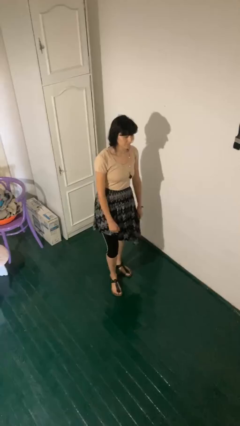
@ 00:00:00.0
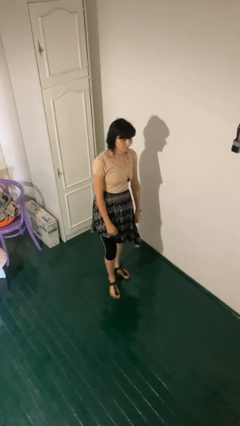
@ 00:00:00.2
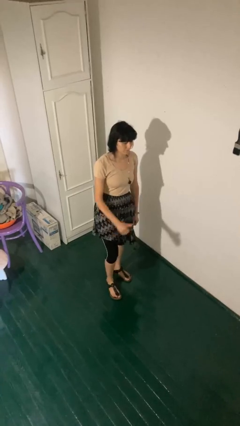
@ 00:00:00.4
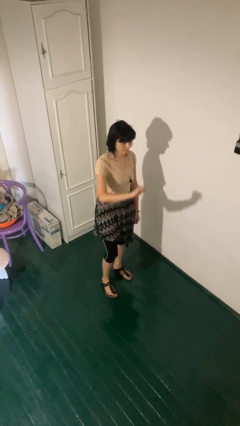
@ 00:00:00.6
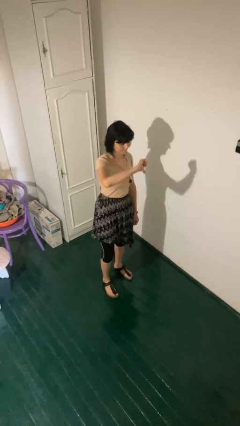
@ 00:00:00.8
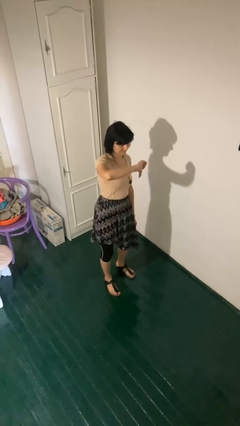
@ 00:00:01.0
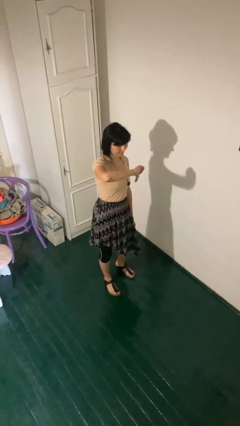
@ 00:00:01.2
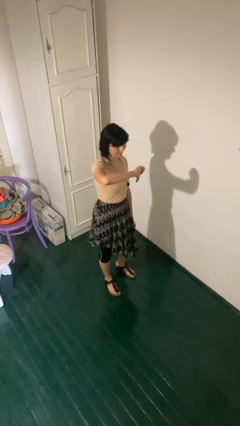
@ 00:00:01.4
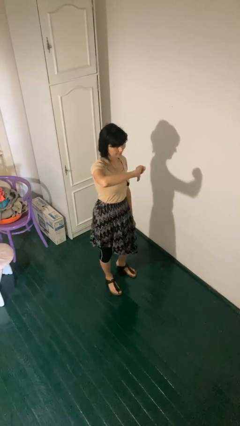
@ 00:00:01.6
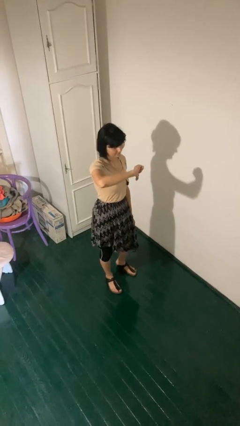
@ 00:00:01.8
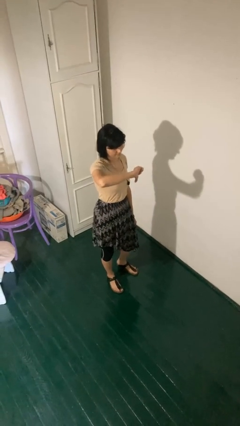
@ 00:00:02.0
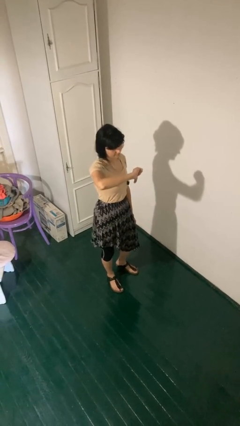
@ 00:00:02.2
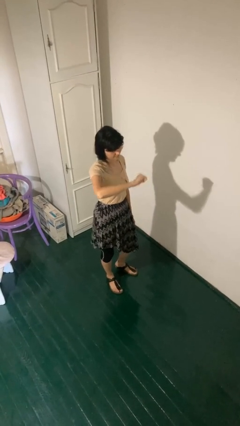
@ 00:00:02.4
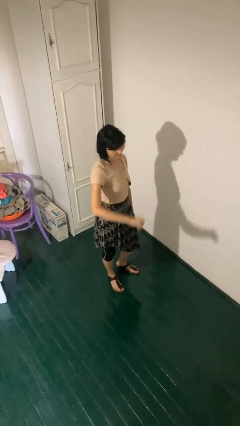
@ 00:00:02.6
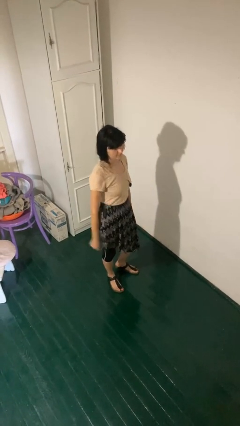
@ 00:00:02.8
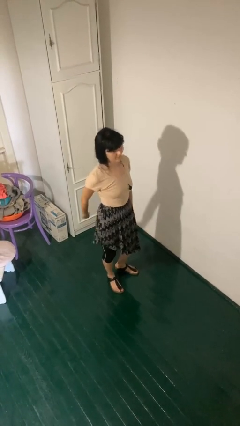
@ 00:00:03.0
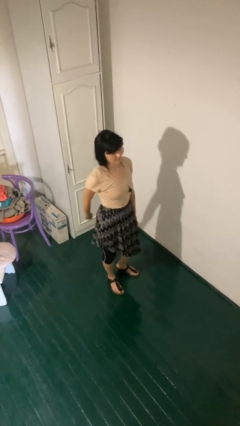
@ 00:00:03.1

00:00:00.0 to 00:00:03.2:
person gestures thumbs down

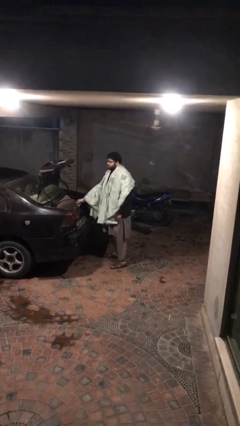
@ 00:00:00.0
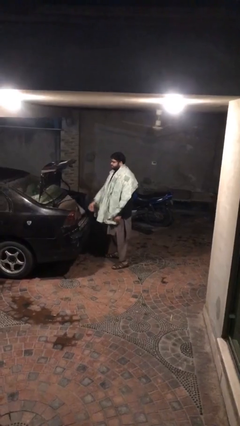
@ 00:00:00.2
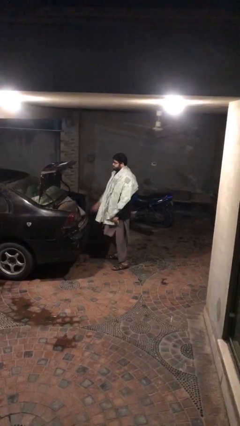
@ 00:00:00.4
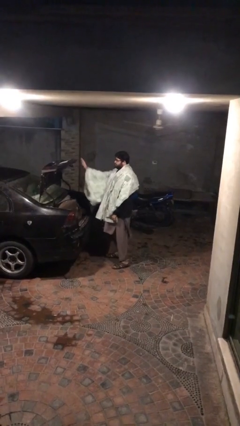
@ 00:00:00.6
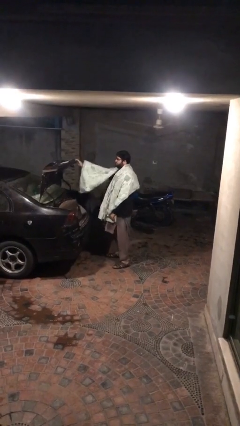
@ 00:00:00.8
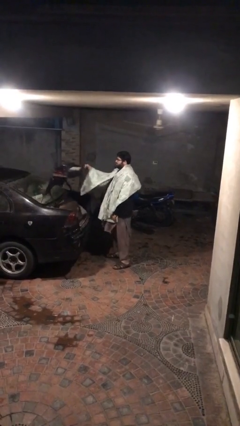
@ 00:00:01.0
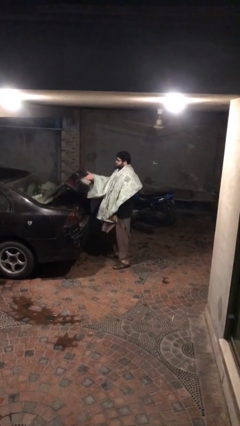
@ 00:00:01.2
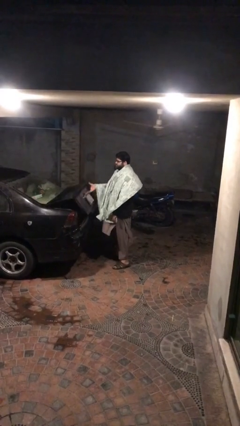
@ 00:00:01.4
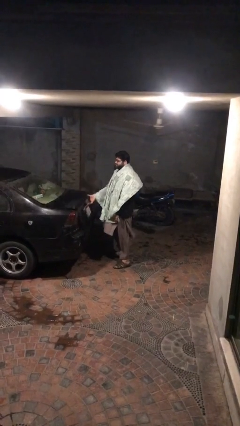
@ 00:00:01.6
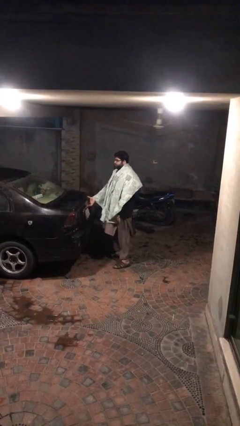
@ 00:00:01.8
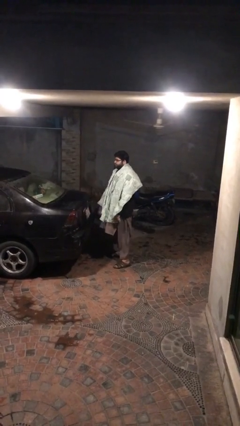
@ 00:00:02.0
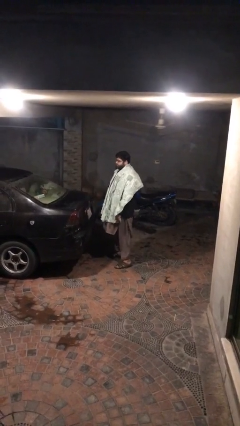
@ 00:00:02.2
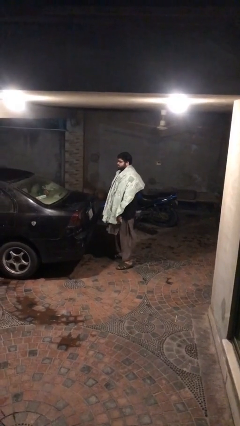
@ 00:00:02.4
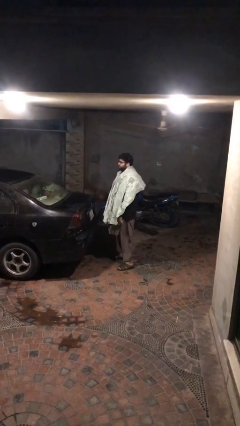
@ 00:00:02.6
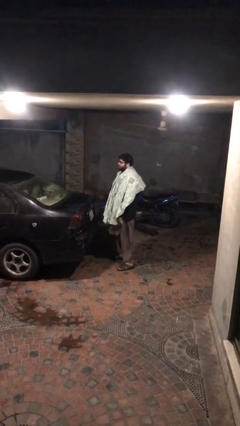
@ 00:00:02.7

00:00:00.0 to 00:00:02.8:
person closes car trunk

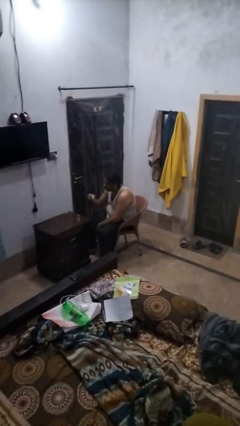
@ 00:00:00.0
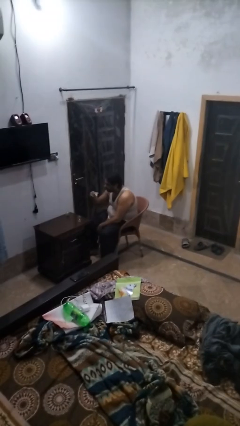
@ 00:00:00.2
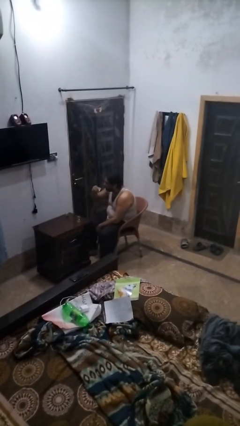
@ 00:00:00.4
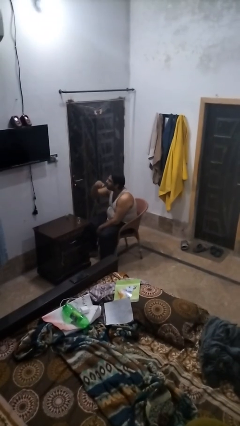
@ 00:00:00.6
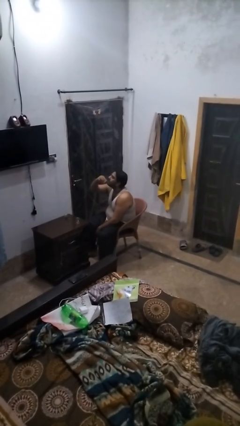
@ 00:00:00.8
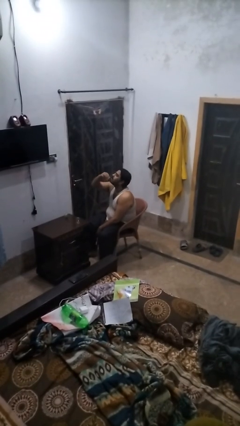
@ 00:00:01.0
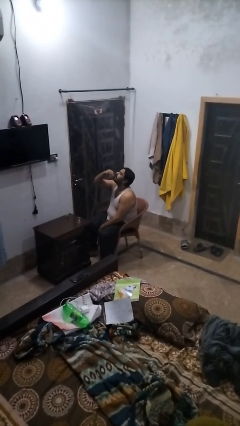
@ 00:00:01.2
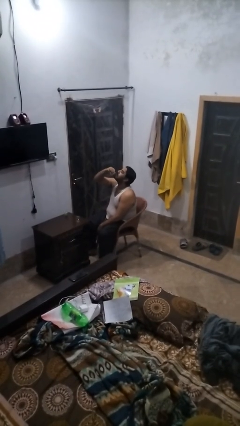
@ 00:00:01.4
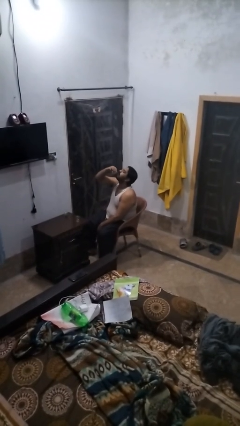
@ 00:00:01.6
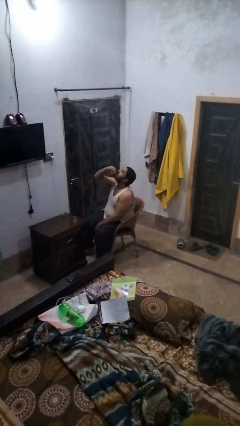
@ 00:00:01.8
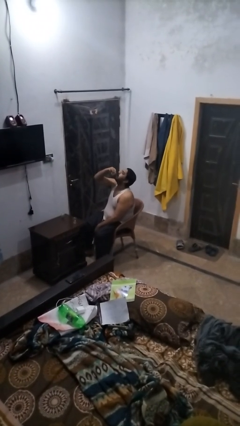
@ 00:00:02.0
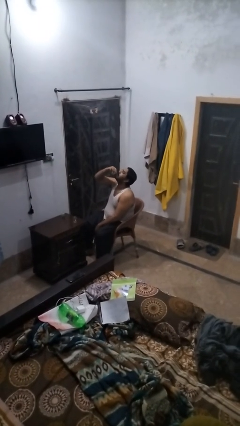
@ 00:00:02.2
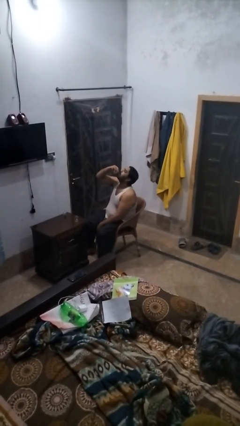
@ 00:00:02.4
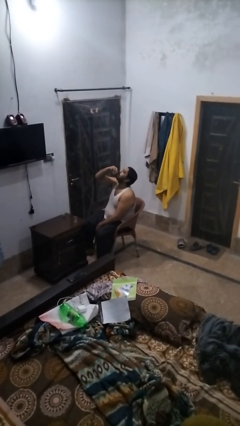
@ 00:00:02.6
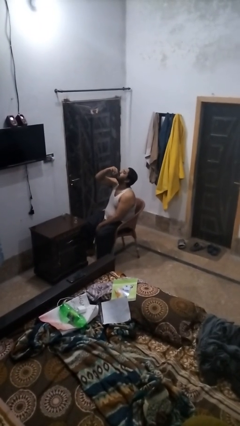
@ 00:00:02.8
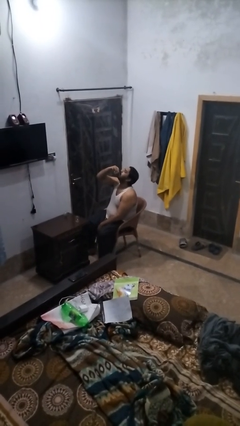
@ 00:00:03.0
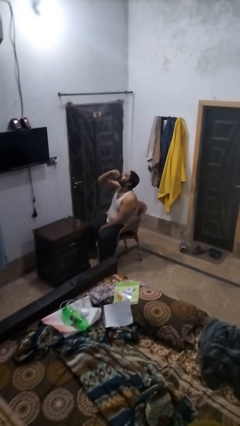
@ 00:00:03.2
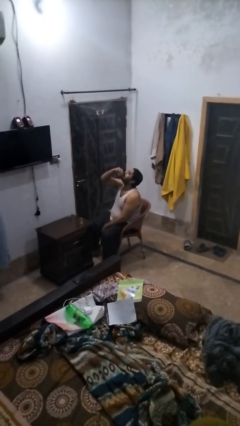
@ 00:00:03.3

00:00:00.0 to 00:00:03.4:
person drinks from shotglass

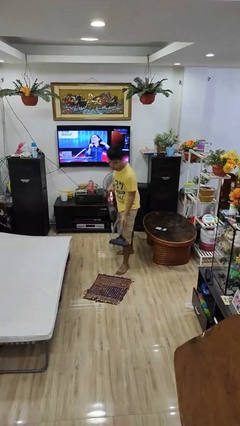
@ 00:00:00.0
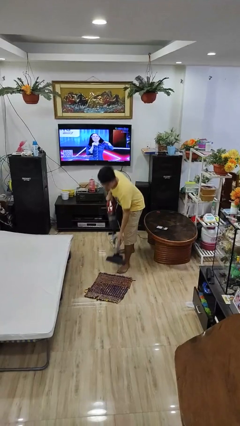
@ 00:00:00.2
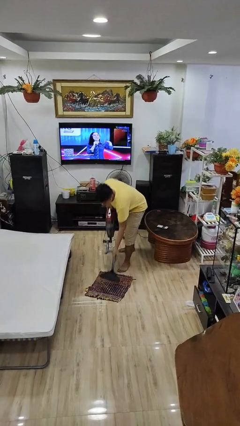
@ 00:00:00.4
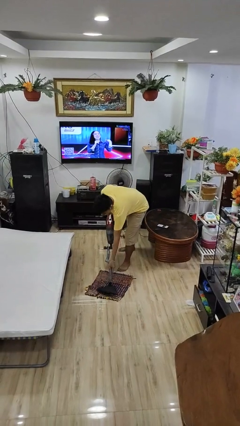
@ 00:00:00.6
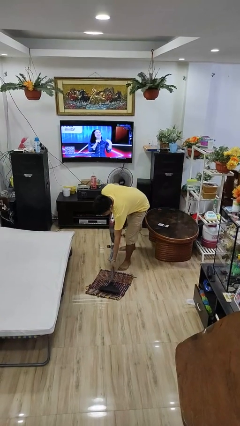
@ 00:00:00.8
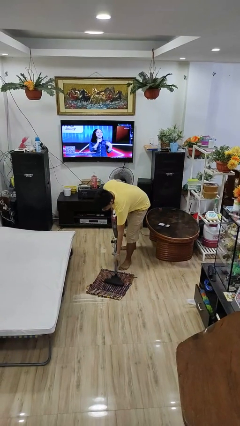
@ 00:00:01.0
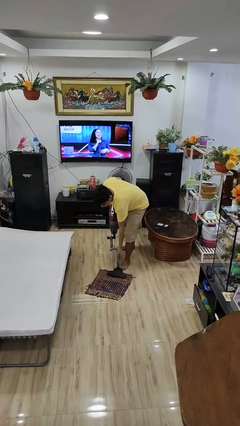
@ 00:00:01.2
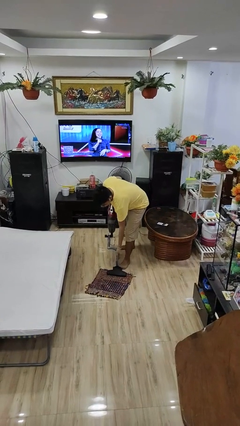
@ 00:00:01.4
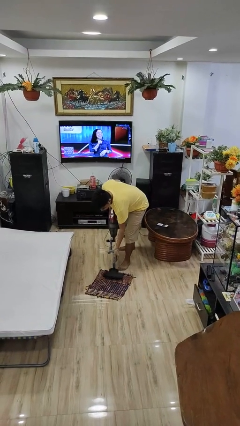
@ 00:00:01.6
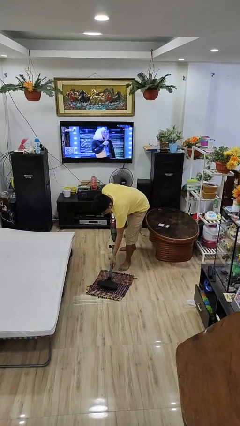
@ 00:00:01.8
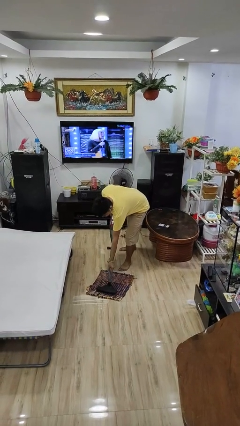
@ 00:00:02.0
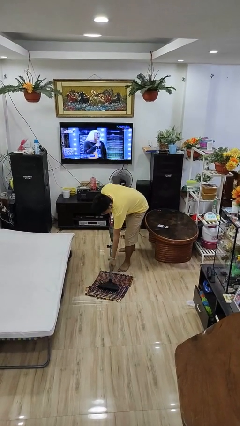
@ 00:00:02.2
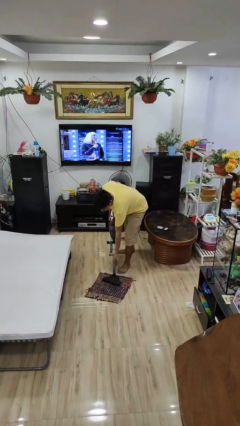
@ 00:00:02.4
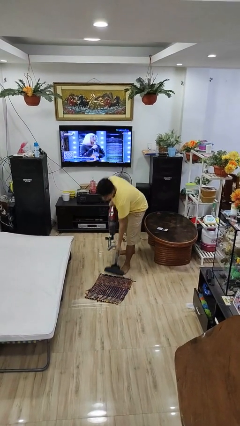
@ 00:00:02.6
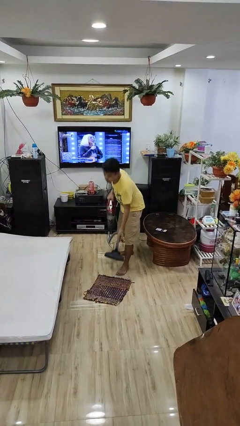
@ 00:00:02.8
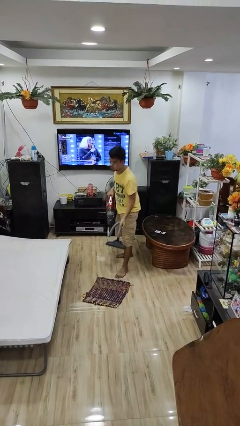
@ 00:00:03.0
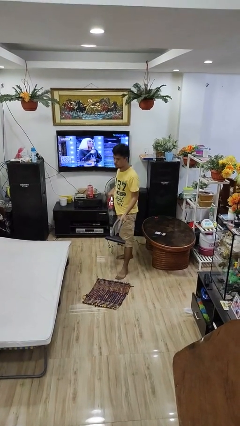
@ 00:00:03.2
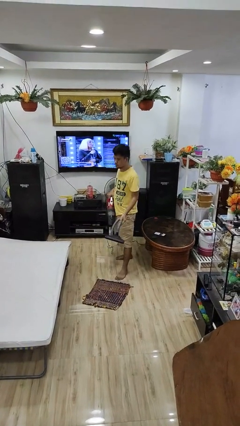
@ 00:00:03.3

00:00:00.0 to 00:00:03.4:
person vacuums carpet

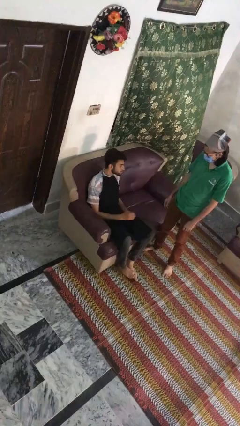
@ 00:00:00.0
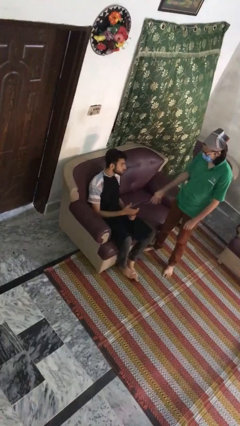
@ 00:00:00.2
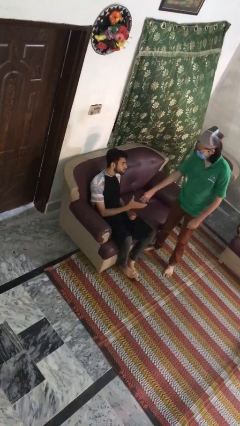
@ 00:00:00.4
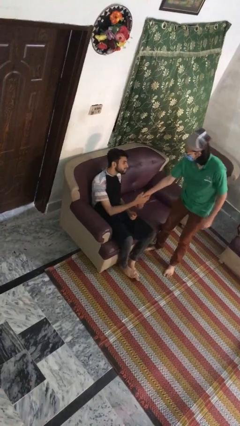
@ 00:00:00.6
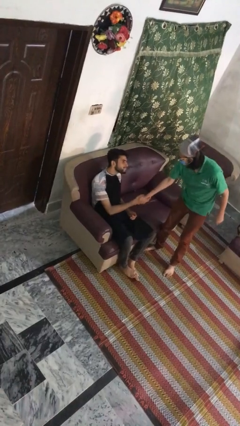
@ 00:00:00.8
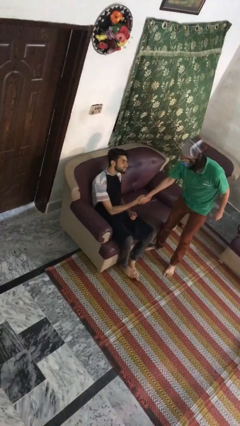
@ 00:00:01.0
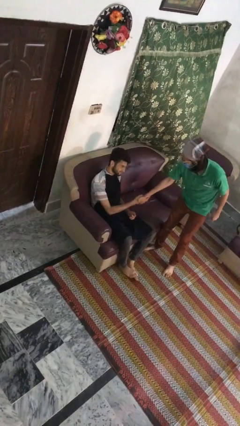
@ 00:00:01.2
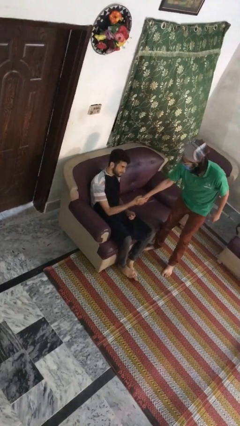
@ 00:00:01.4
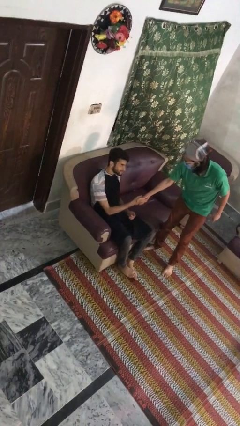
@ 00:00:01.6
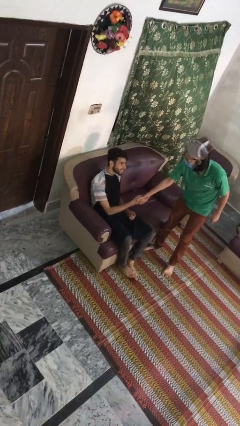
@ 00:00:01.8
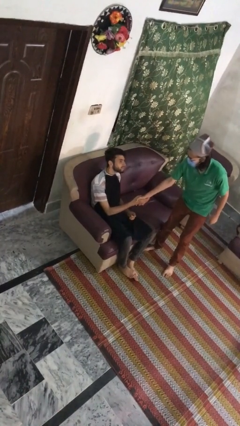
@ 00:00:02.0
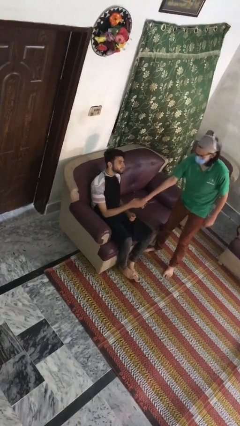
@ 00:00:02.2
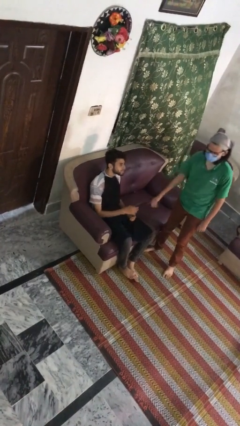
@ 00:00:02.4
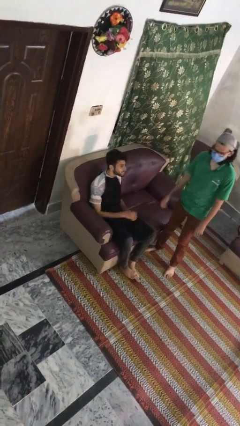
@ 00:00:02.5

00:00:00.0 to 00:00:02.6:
person shakes hand

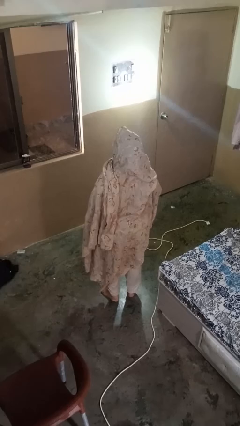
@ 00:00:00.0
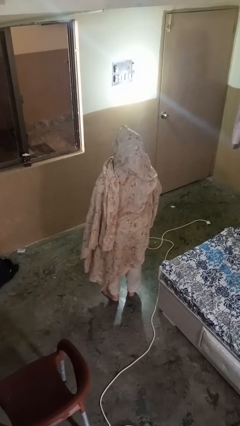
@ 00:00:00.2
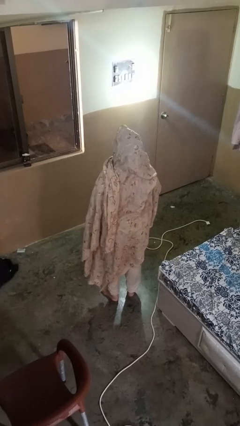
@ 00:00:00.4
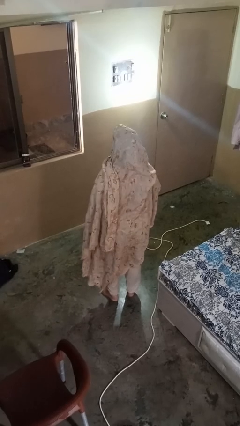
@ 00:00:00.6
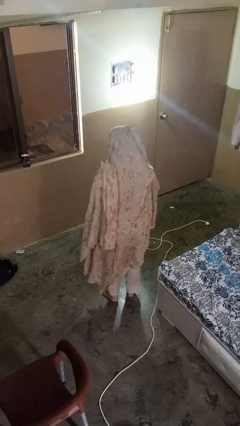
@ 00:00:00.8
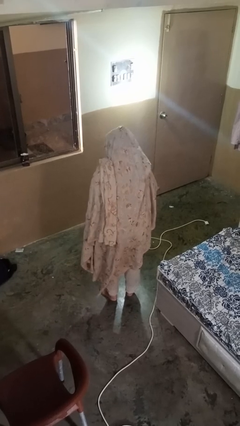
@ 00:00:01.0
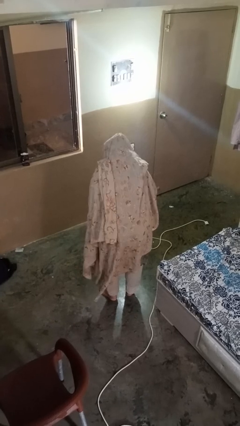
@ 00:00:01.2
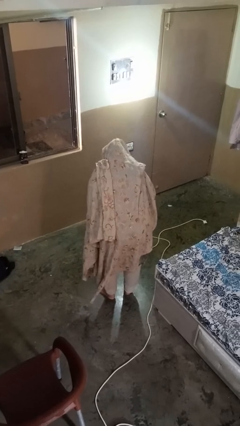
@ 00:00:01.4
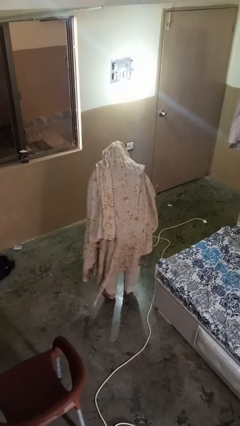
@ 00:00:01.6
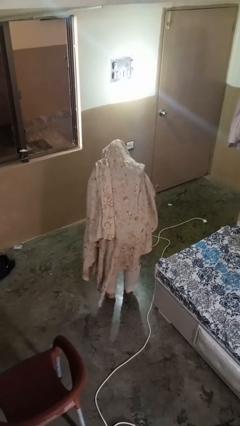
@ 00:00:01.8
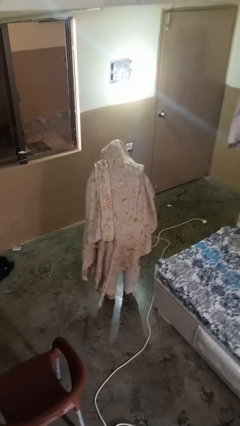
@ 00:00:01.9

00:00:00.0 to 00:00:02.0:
person bows
